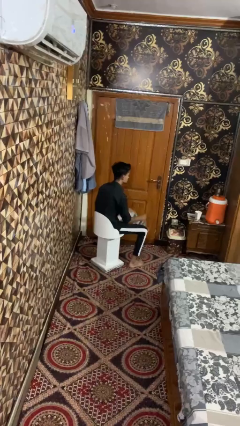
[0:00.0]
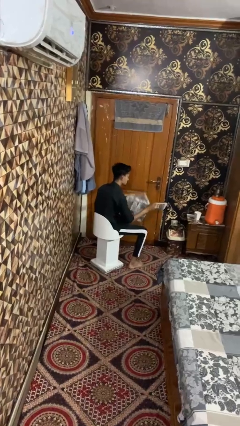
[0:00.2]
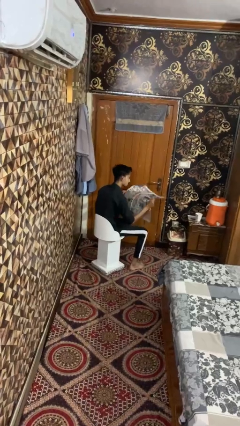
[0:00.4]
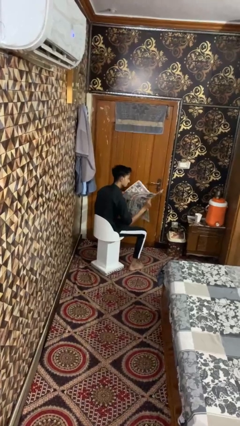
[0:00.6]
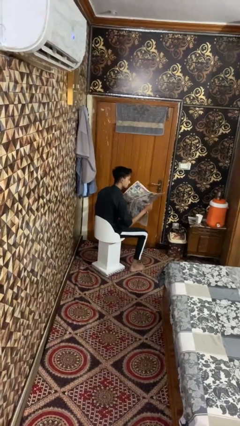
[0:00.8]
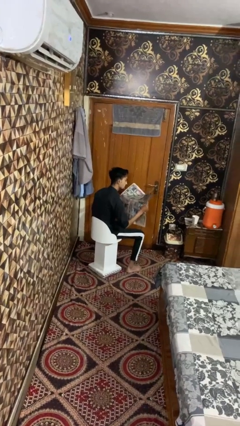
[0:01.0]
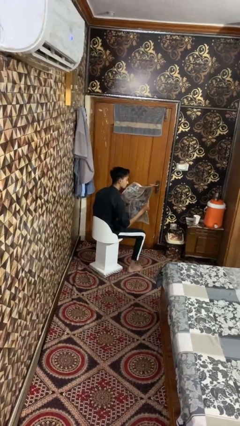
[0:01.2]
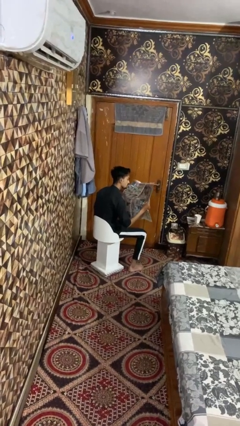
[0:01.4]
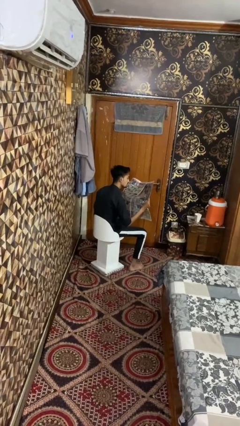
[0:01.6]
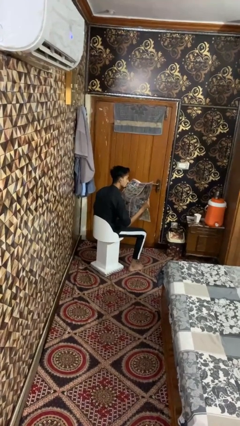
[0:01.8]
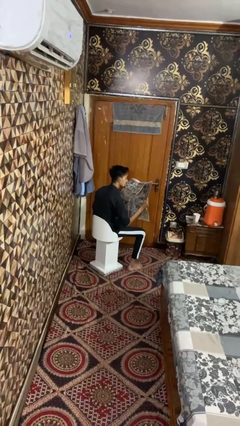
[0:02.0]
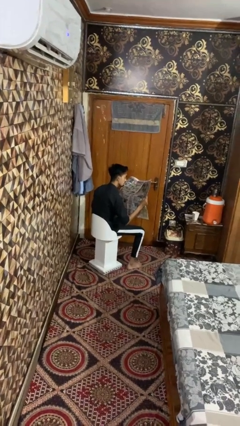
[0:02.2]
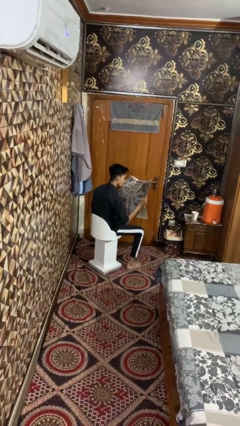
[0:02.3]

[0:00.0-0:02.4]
person reads magazine

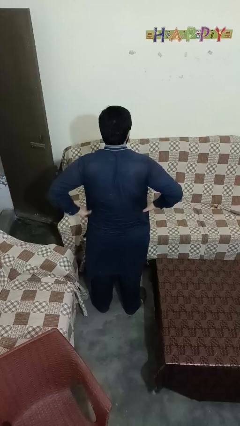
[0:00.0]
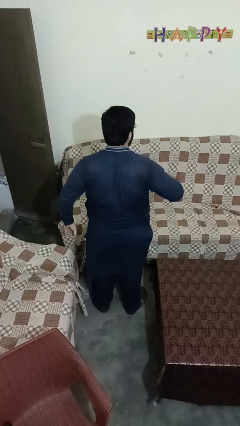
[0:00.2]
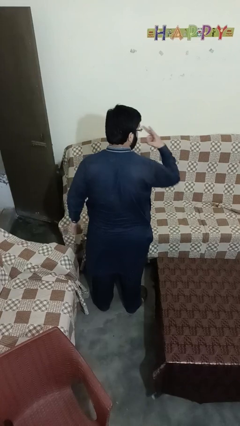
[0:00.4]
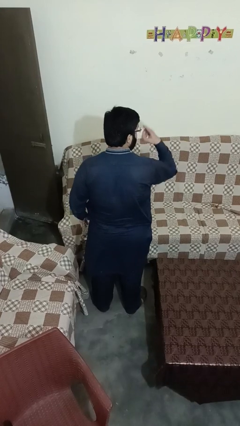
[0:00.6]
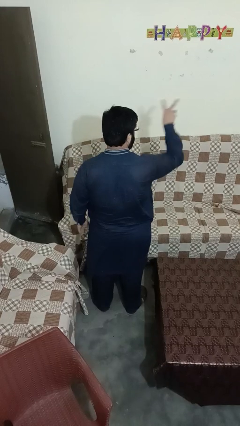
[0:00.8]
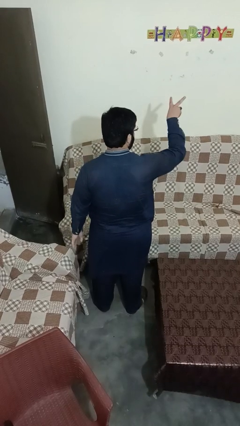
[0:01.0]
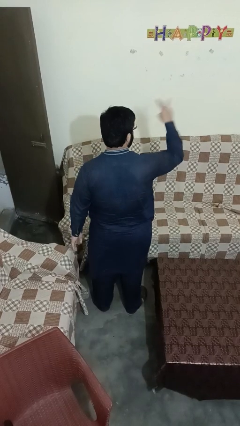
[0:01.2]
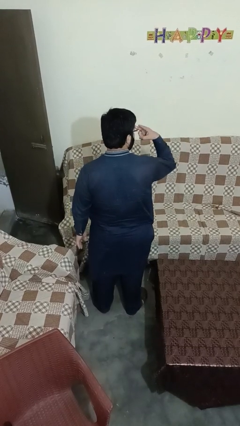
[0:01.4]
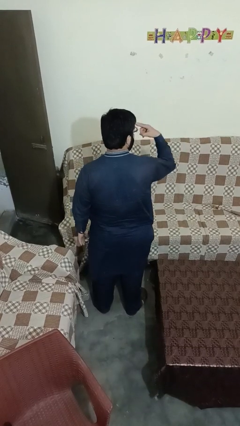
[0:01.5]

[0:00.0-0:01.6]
person gestures watch closely

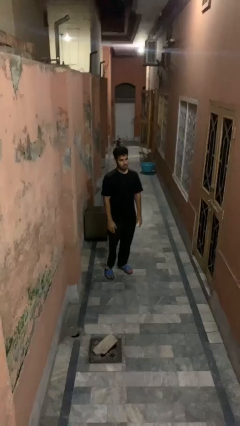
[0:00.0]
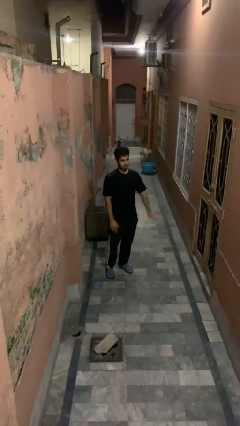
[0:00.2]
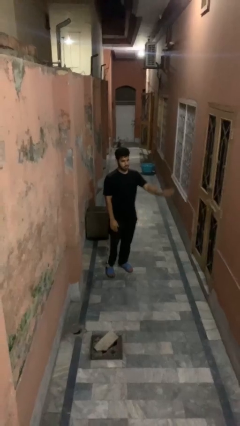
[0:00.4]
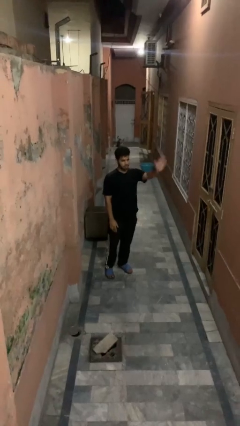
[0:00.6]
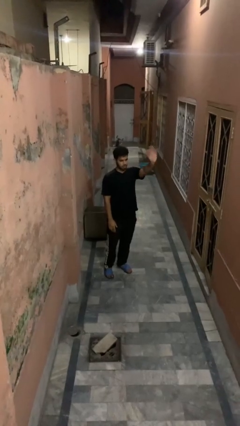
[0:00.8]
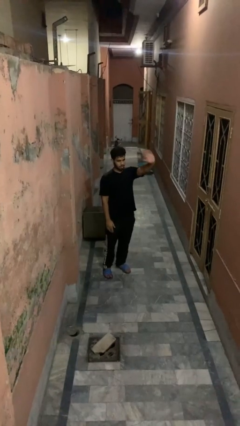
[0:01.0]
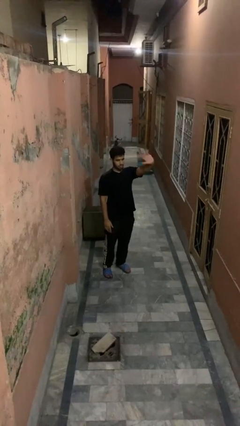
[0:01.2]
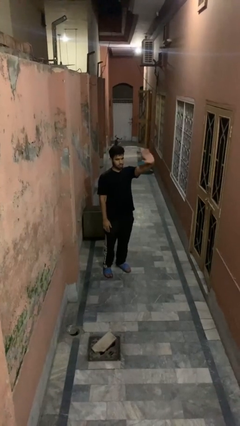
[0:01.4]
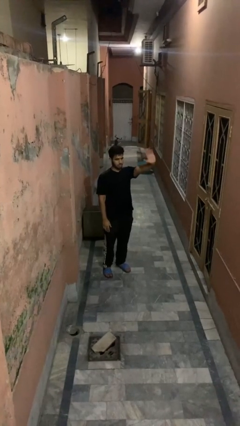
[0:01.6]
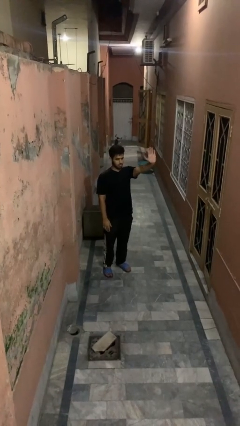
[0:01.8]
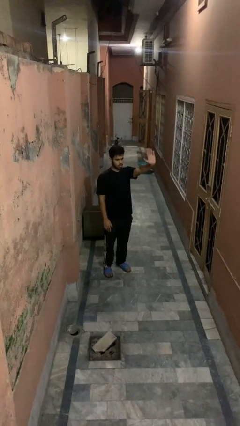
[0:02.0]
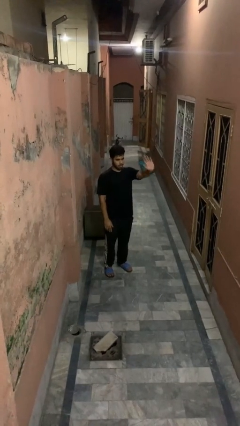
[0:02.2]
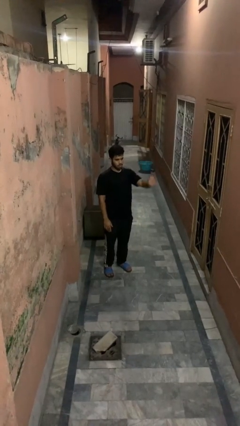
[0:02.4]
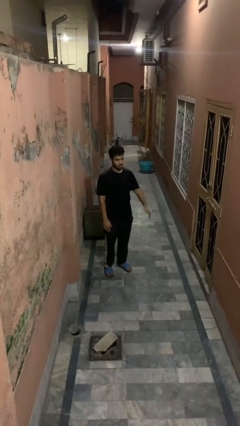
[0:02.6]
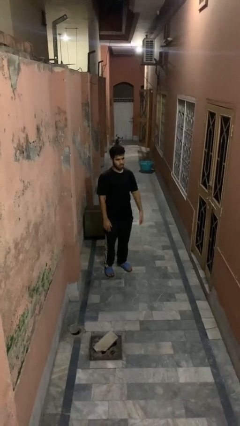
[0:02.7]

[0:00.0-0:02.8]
person waves at person

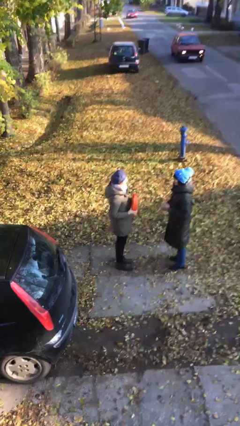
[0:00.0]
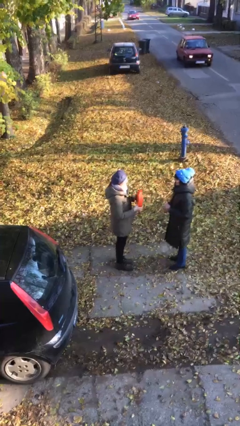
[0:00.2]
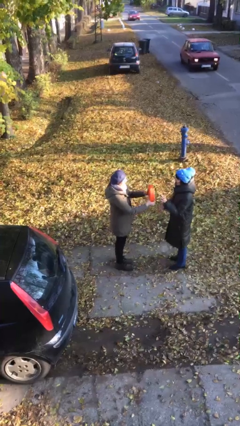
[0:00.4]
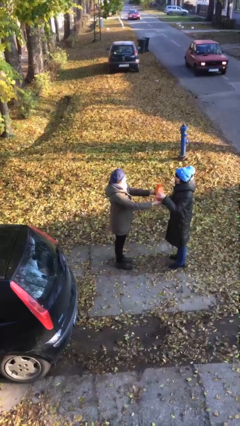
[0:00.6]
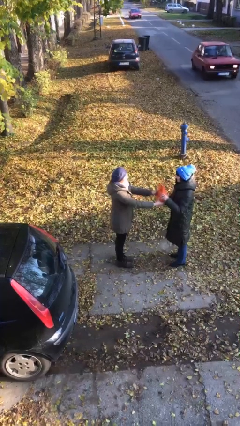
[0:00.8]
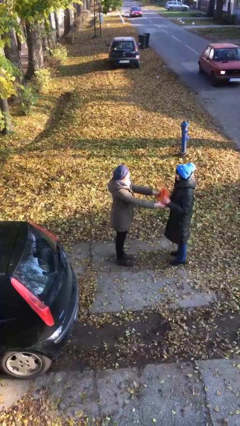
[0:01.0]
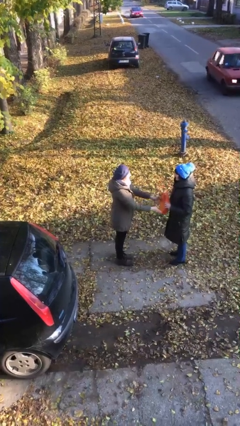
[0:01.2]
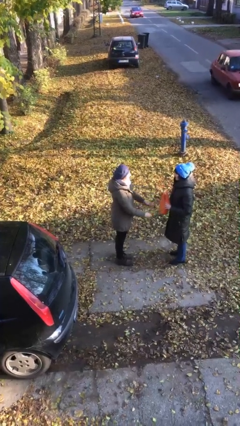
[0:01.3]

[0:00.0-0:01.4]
person transfers object to person

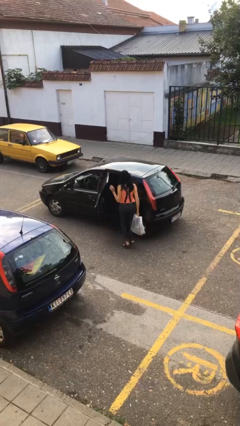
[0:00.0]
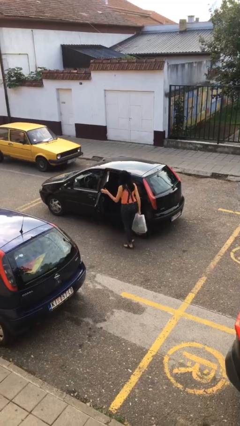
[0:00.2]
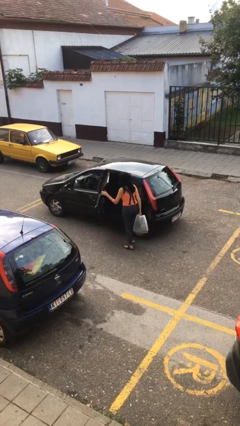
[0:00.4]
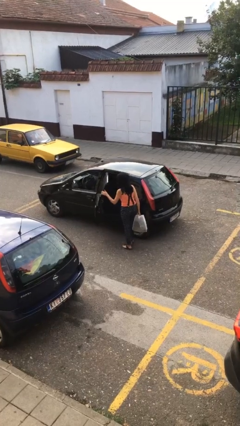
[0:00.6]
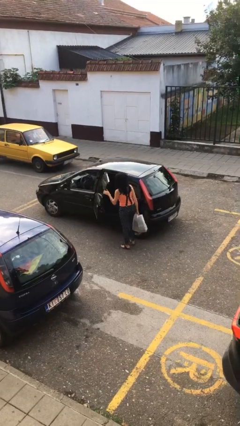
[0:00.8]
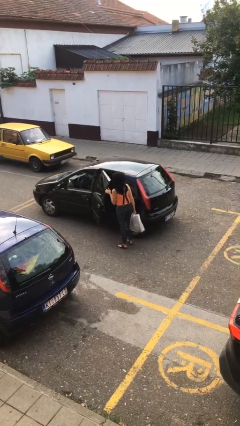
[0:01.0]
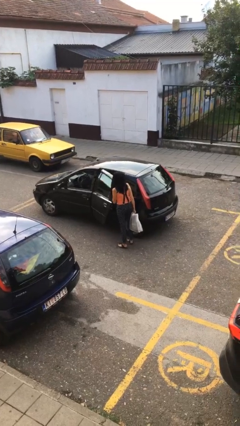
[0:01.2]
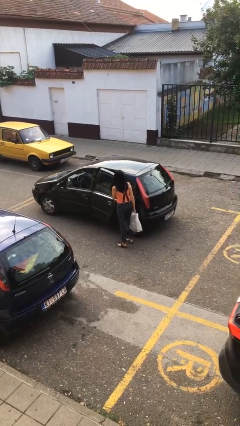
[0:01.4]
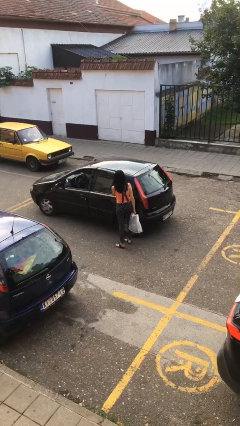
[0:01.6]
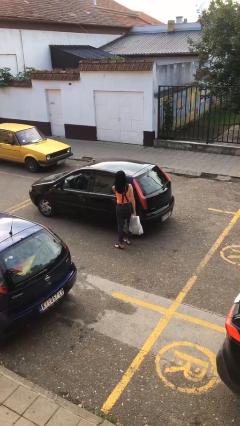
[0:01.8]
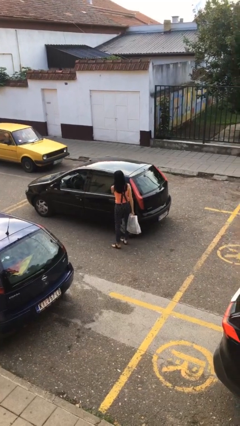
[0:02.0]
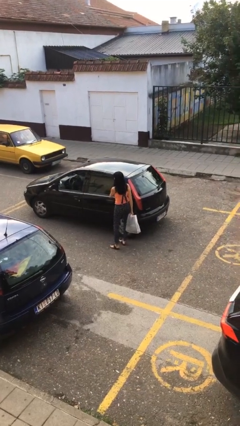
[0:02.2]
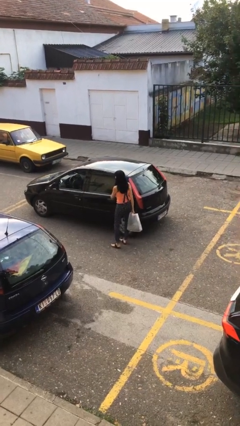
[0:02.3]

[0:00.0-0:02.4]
person closes car door

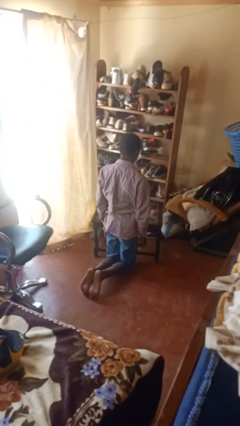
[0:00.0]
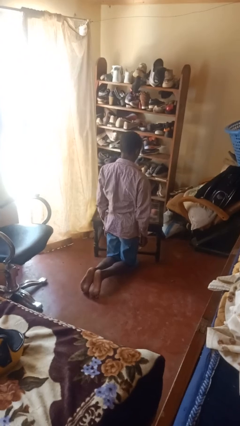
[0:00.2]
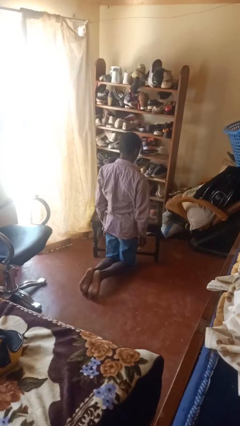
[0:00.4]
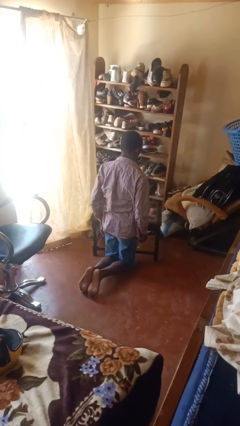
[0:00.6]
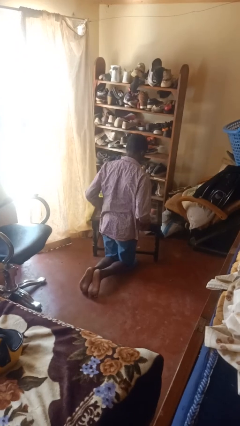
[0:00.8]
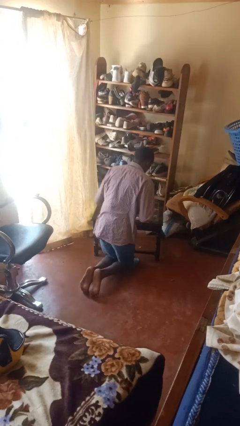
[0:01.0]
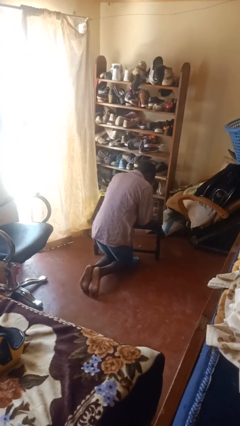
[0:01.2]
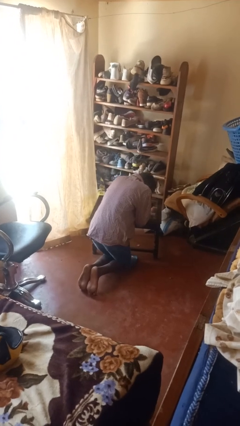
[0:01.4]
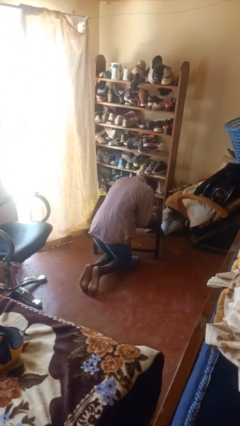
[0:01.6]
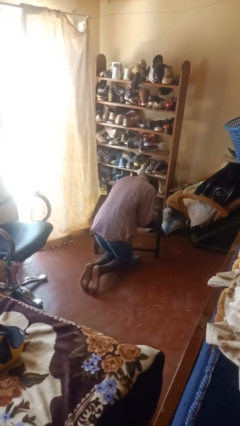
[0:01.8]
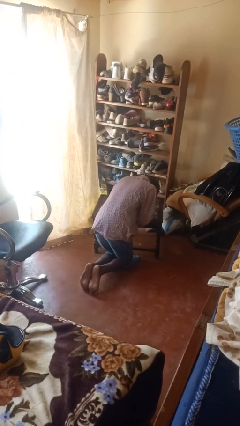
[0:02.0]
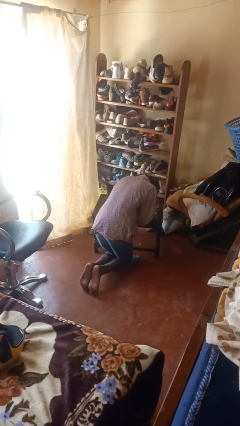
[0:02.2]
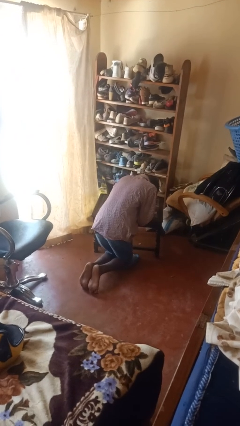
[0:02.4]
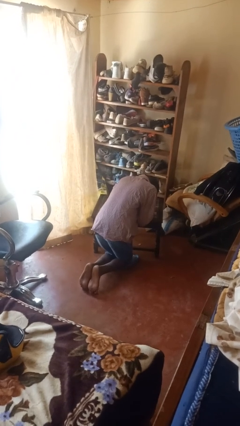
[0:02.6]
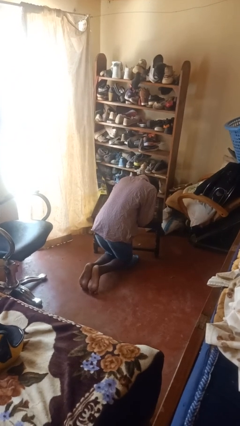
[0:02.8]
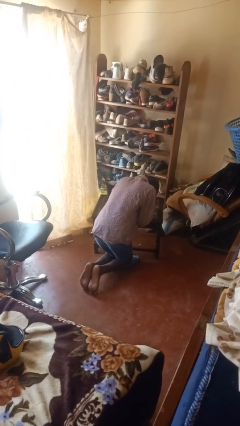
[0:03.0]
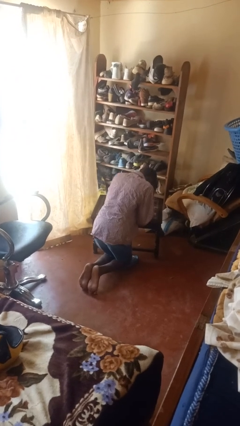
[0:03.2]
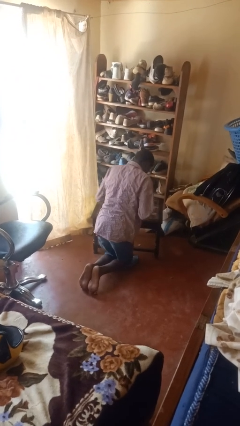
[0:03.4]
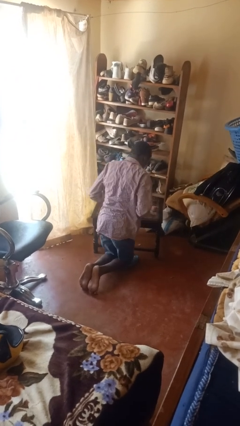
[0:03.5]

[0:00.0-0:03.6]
person prays

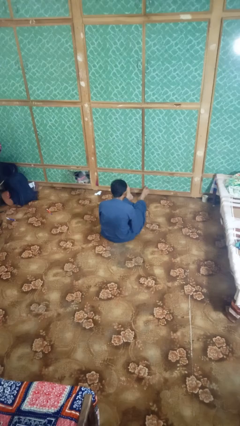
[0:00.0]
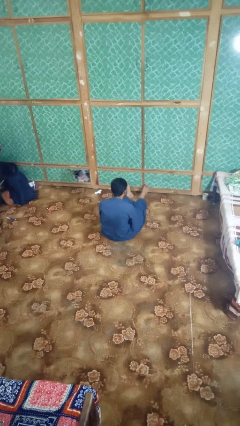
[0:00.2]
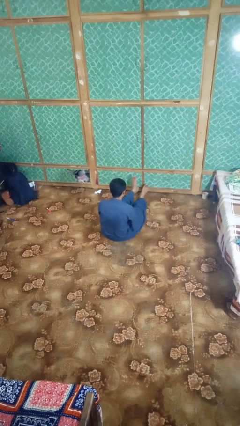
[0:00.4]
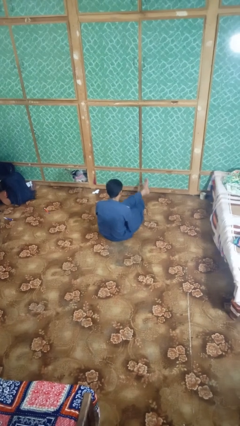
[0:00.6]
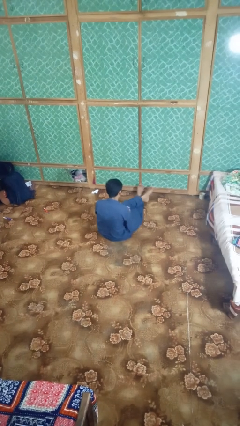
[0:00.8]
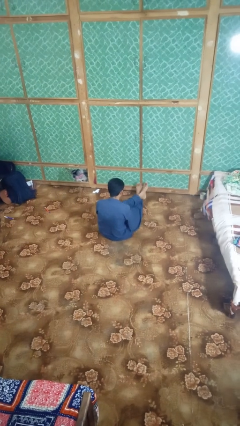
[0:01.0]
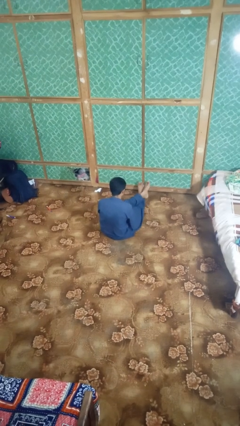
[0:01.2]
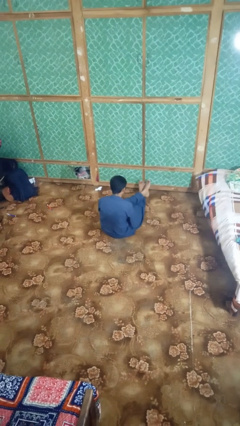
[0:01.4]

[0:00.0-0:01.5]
person crosses legs

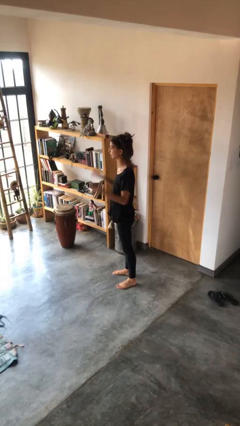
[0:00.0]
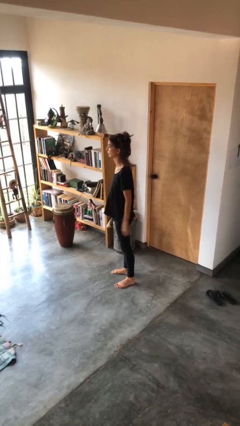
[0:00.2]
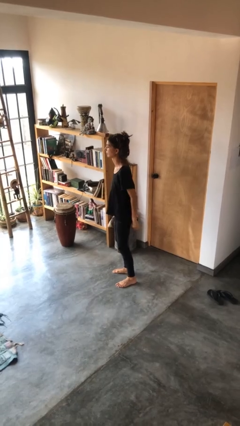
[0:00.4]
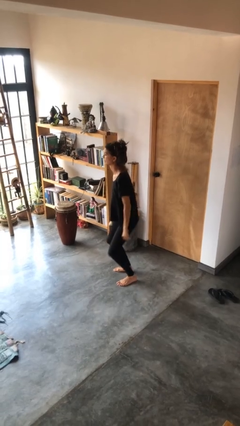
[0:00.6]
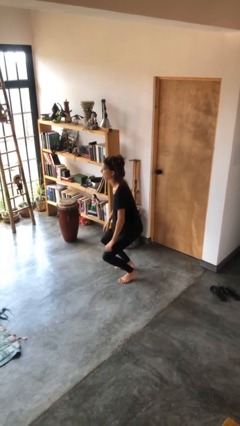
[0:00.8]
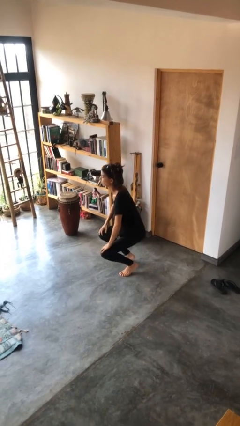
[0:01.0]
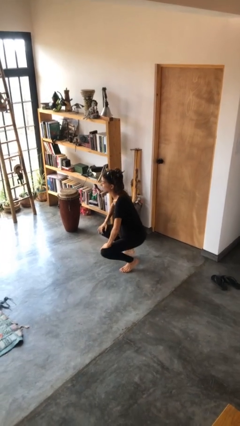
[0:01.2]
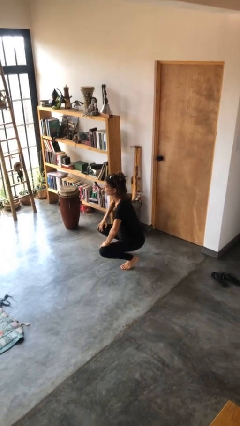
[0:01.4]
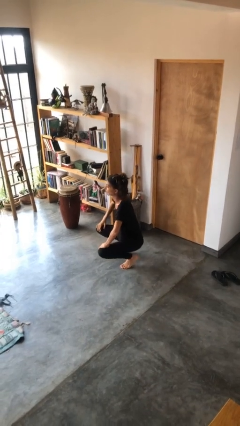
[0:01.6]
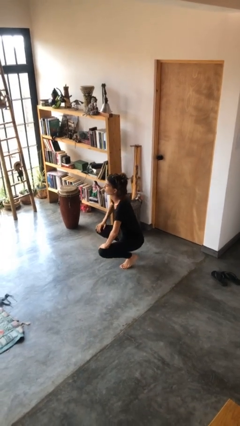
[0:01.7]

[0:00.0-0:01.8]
person squats
